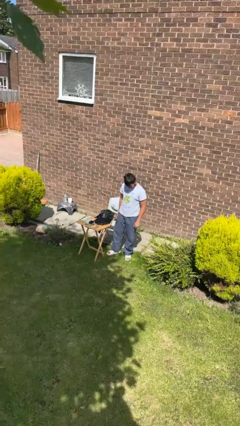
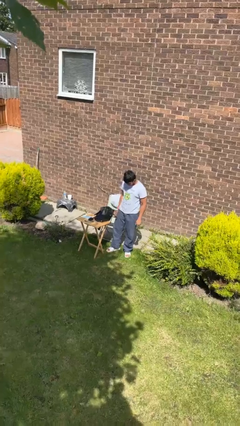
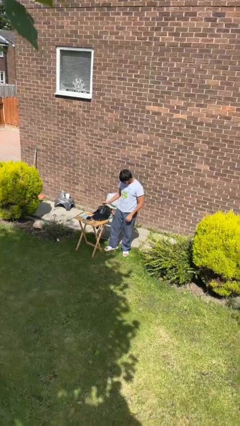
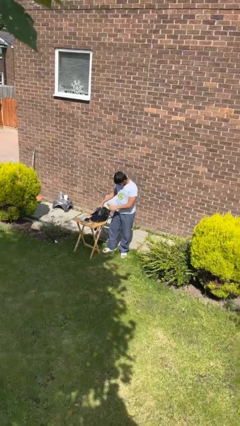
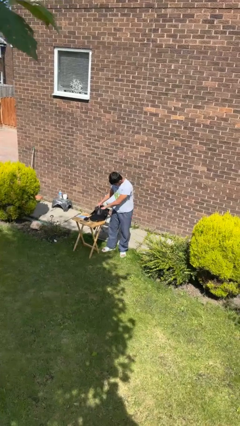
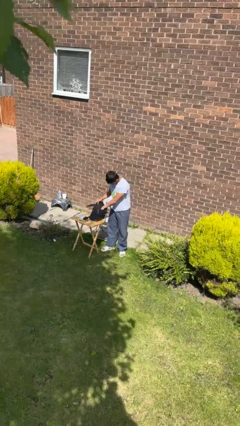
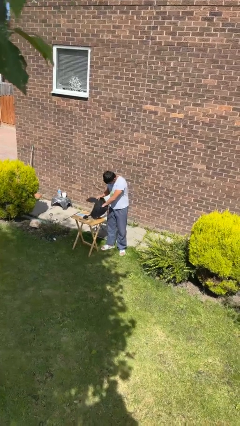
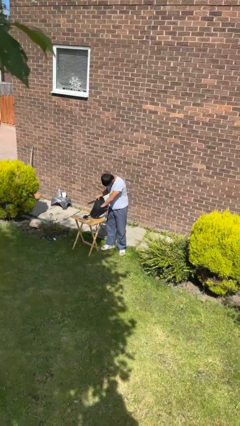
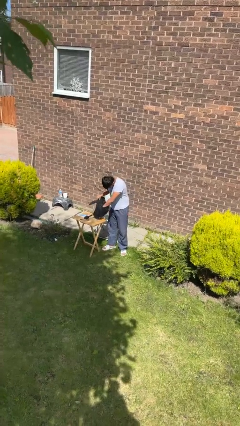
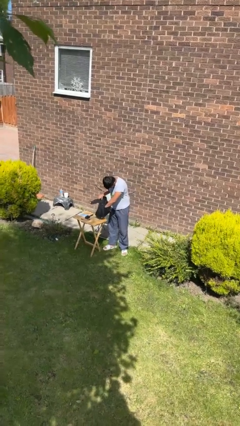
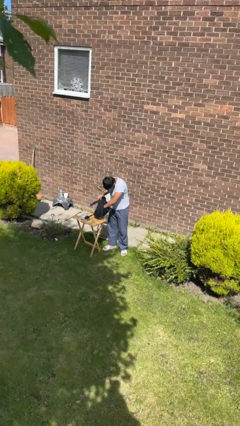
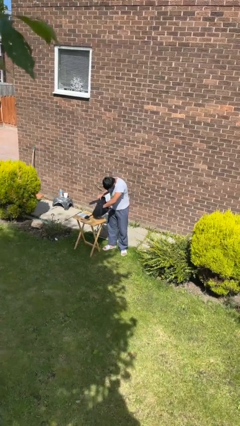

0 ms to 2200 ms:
person searches in backpack

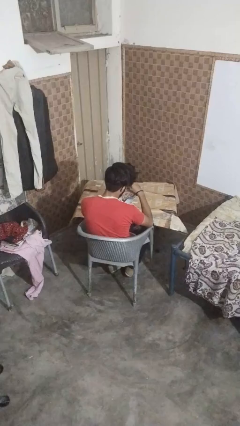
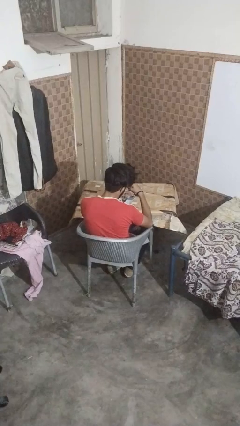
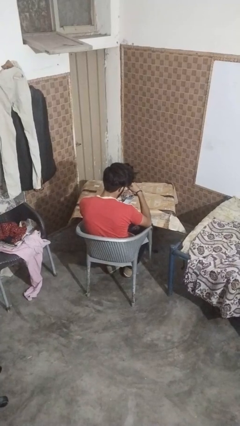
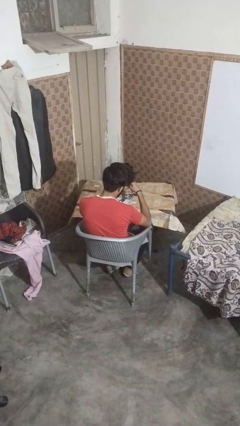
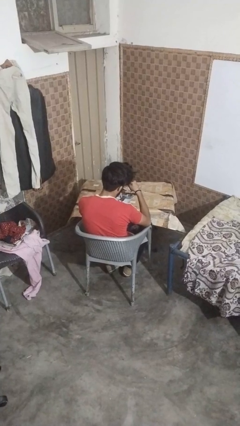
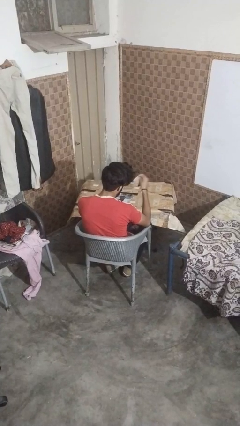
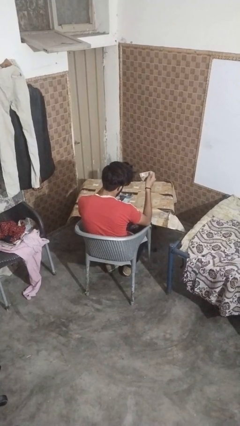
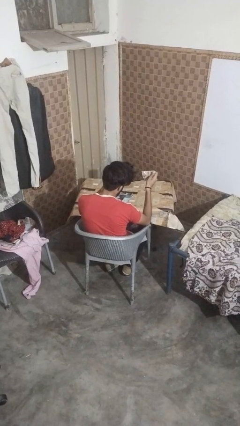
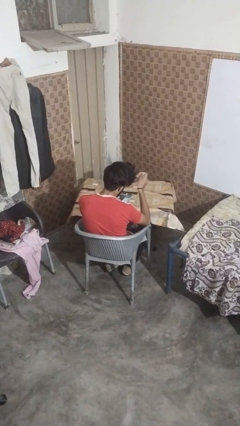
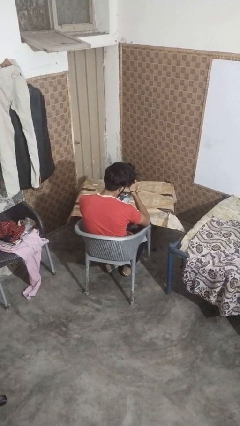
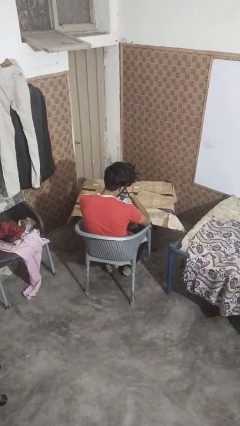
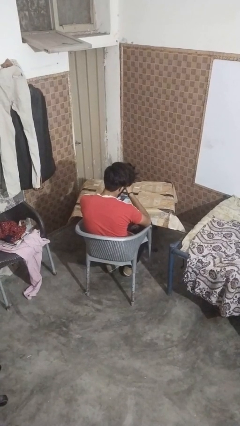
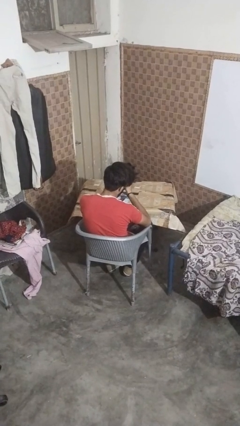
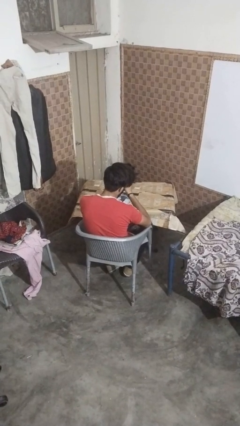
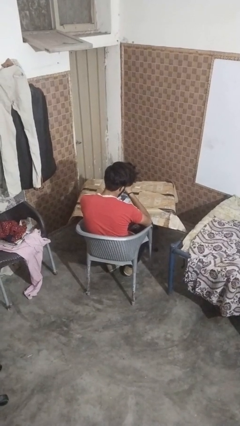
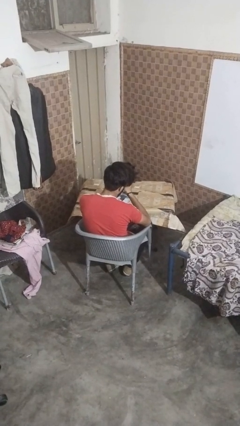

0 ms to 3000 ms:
person tears paper

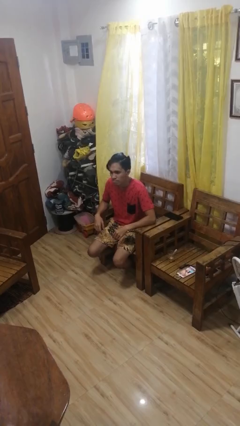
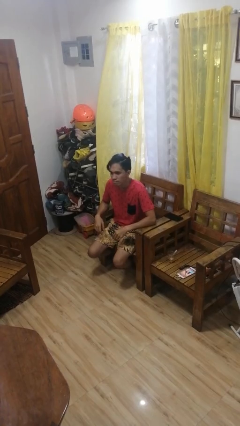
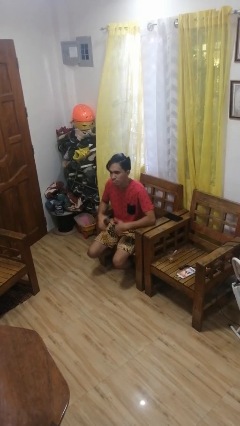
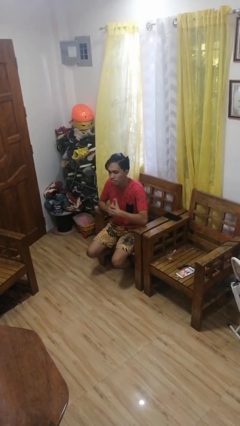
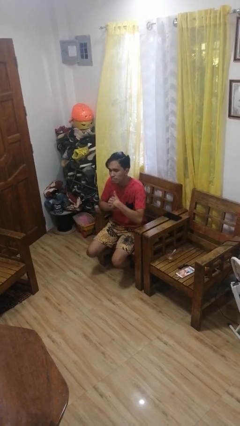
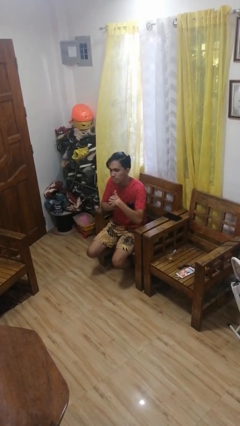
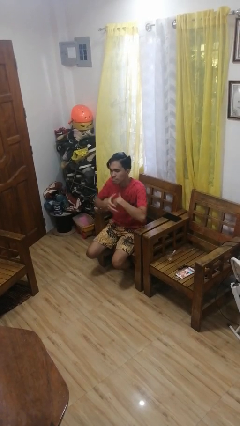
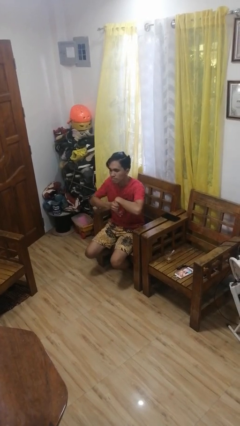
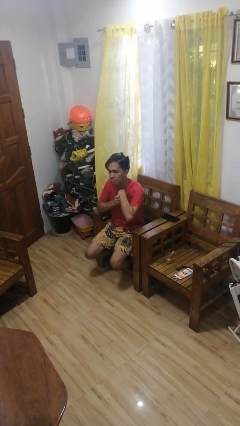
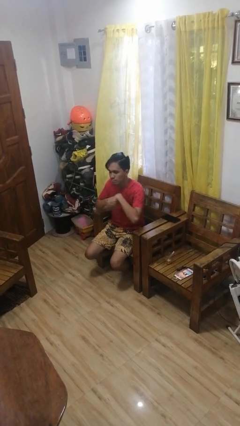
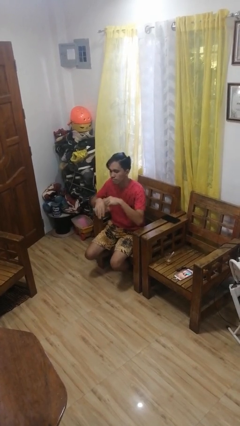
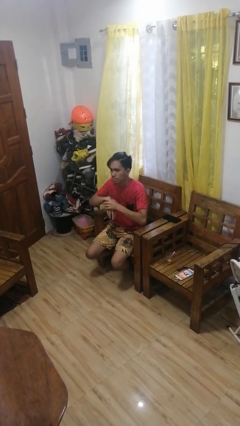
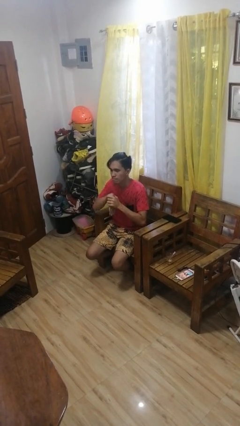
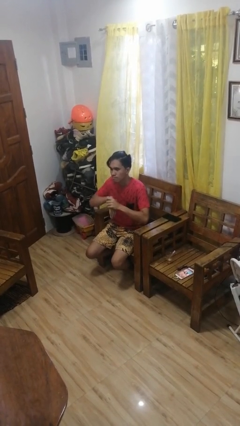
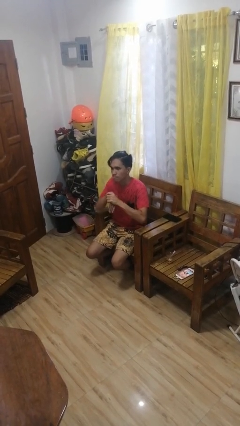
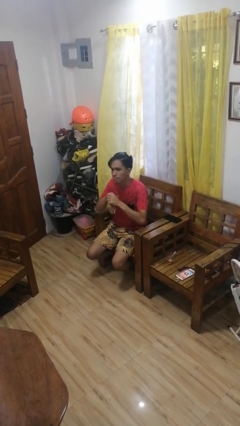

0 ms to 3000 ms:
person cracks knuckles

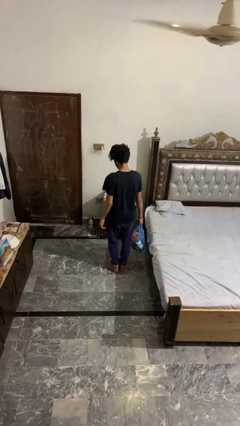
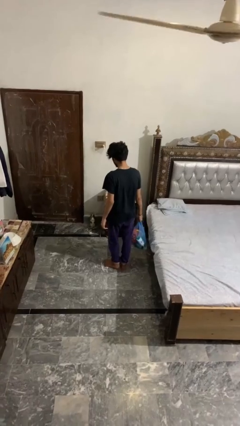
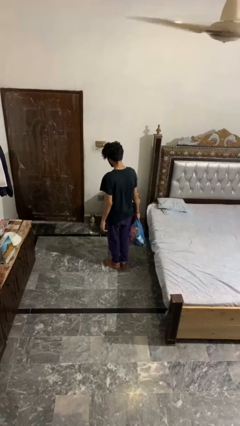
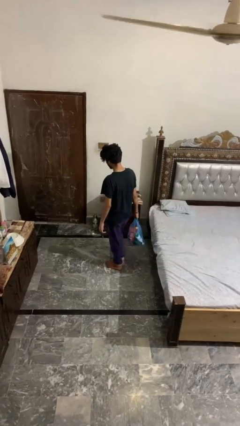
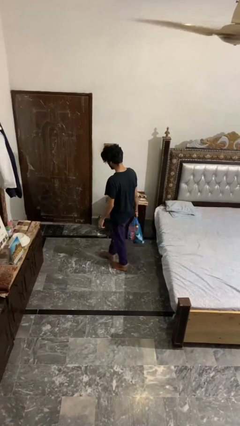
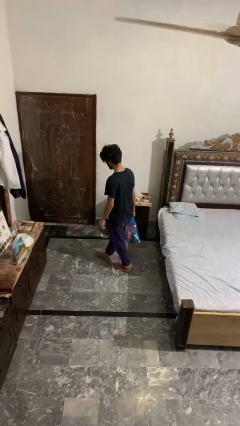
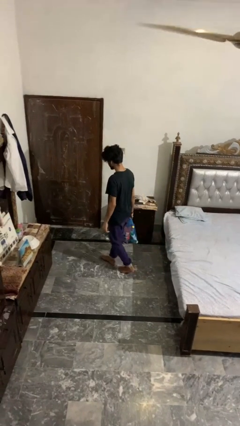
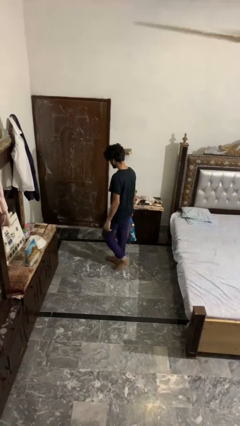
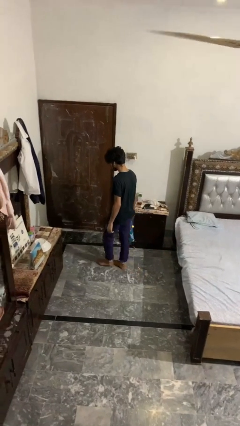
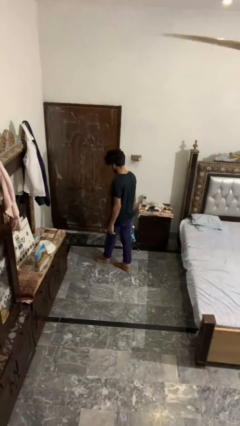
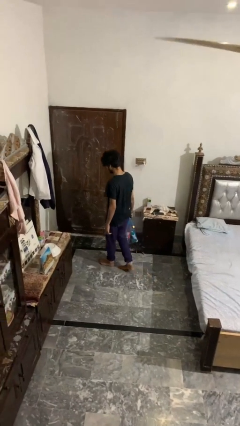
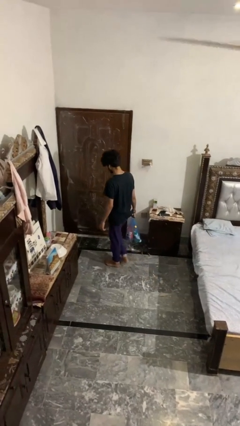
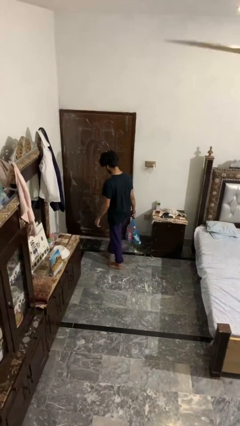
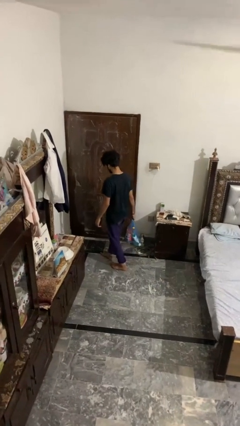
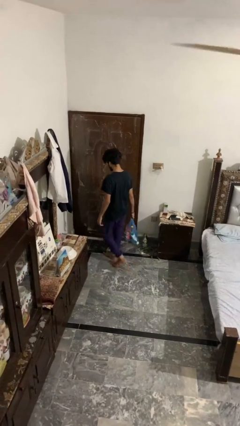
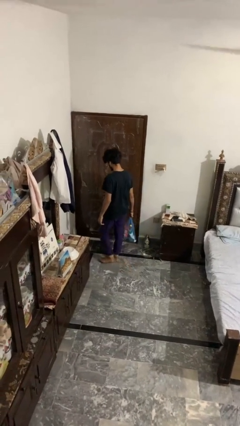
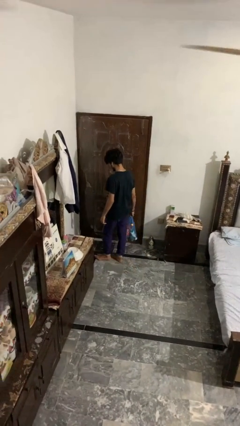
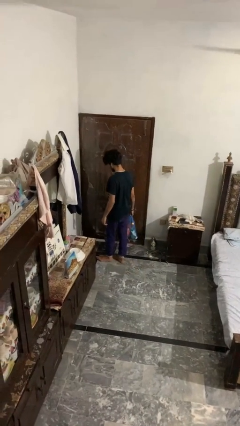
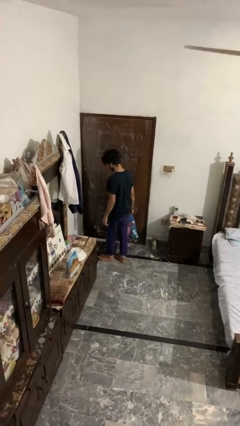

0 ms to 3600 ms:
person carries groceries

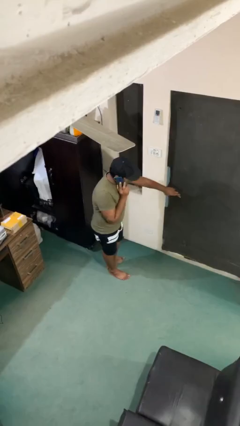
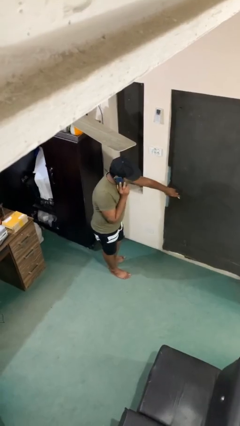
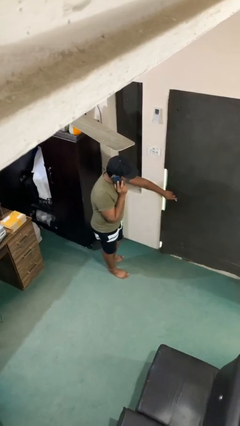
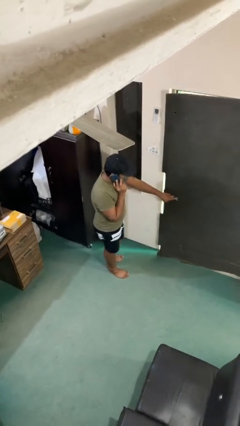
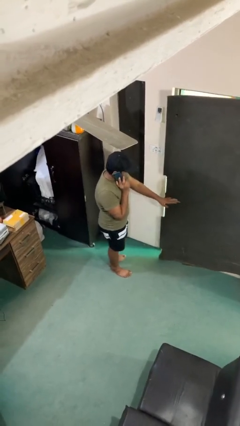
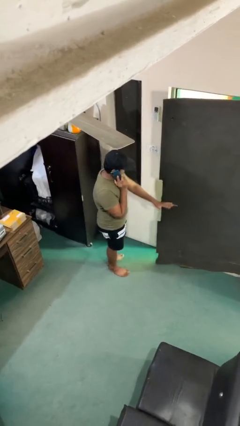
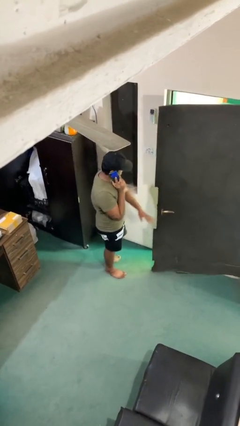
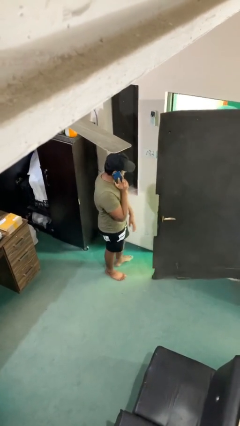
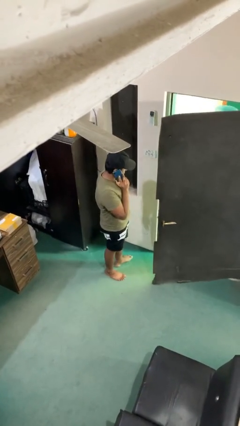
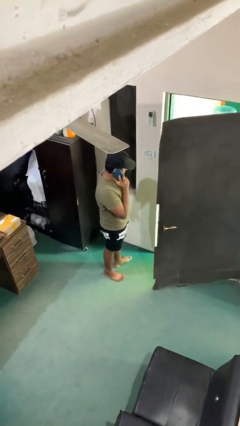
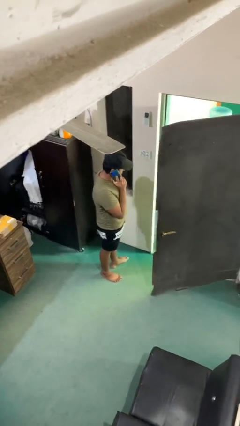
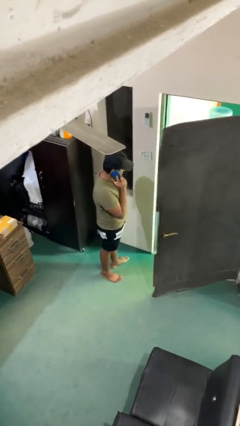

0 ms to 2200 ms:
person opens facility door

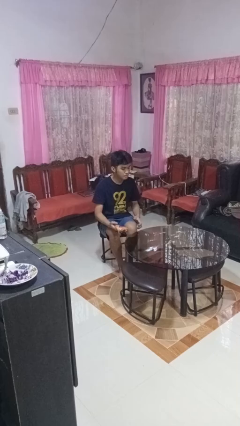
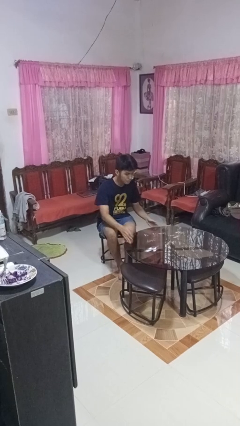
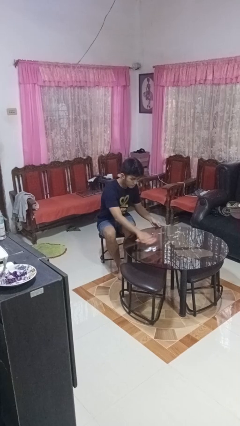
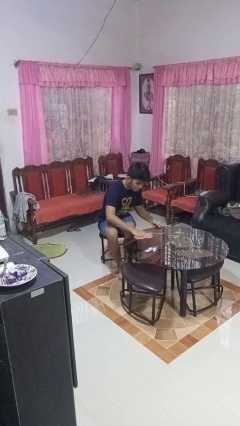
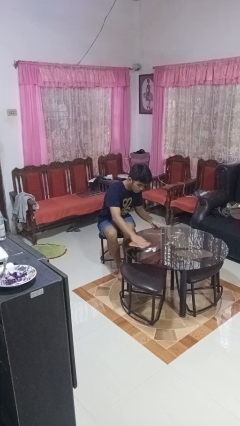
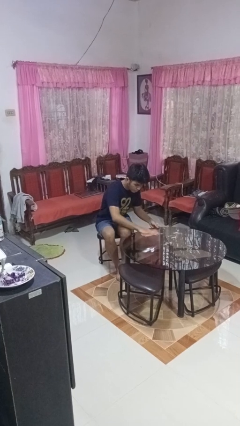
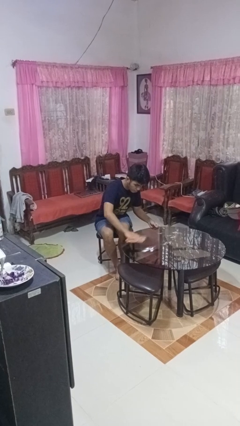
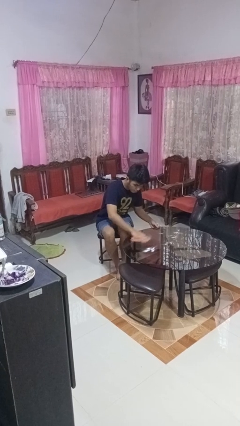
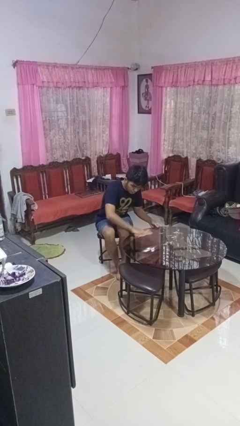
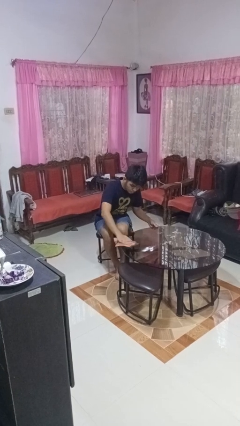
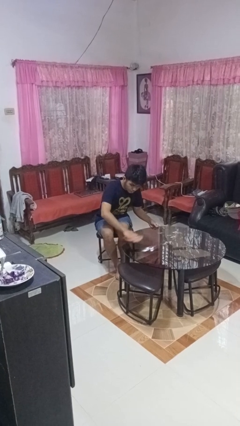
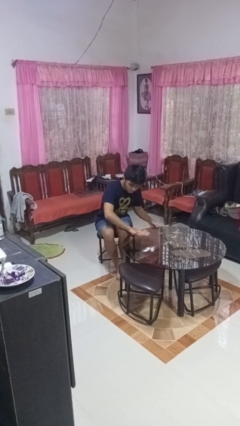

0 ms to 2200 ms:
person cleans table with rag

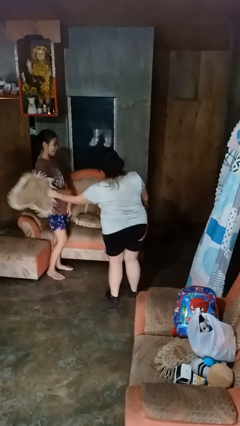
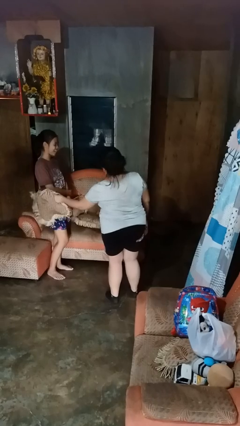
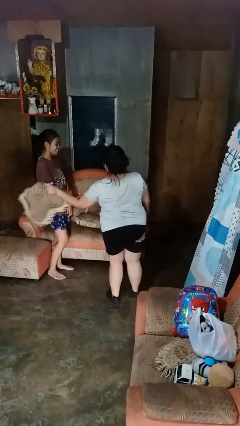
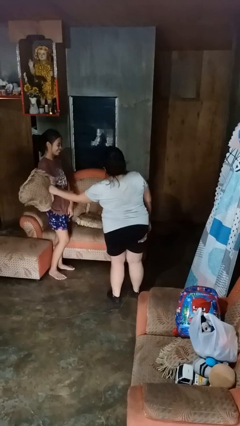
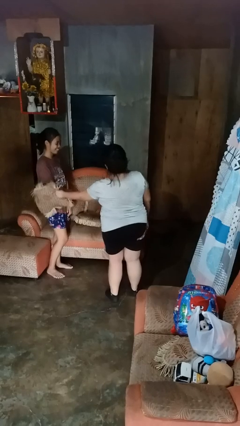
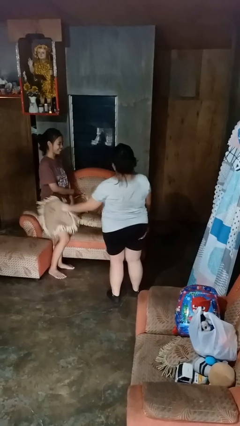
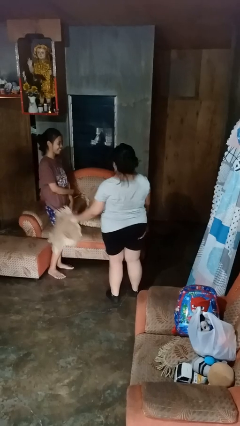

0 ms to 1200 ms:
person hits person with pillow
